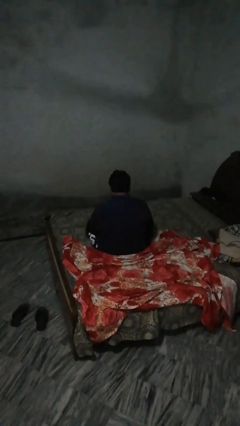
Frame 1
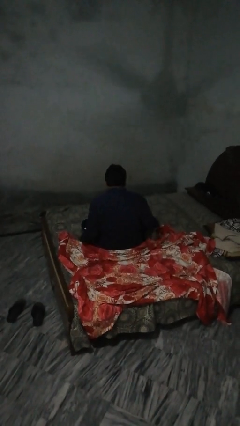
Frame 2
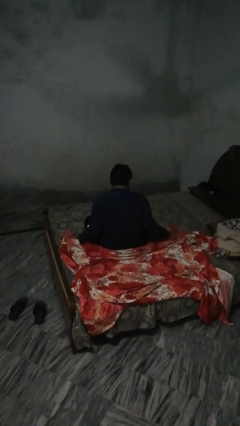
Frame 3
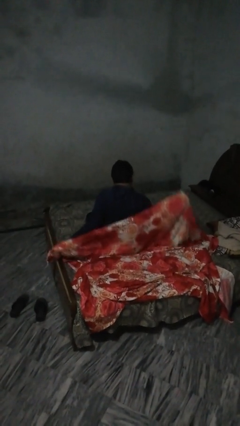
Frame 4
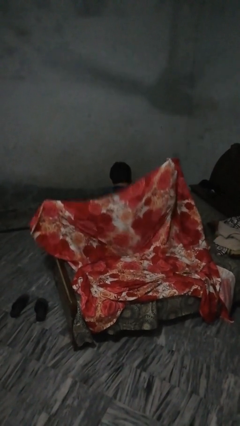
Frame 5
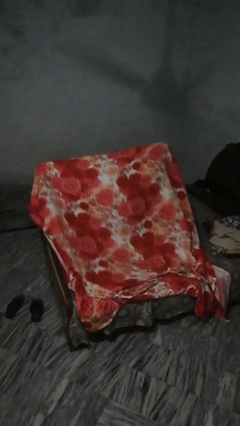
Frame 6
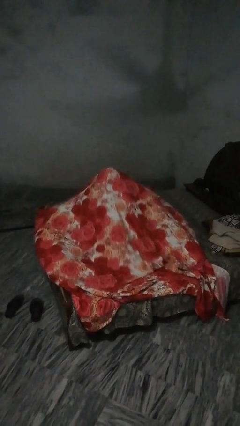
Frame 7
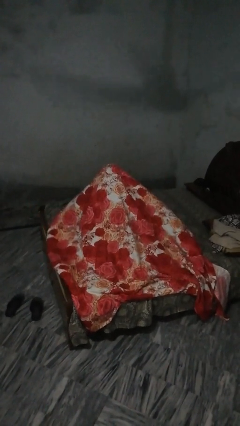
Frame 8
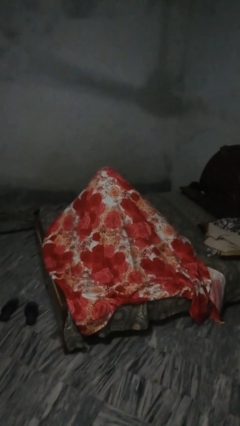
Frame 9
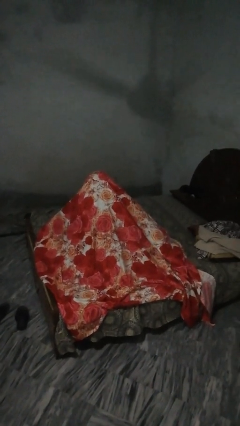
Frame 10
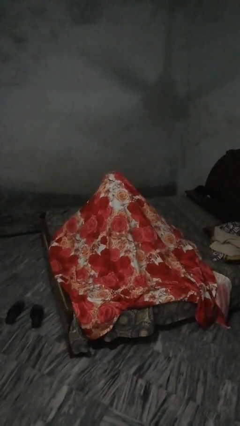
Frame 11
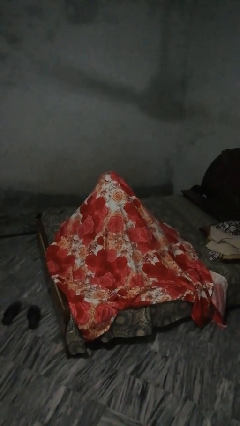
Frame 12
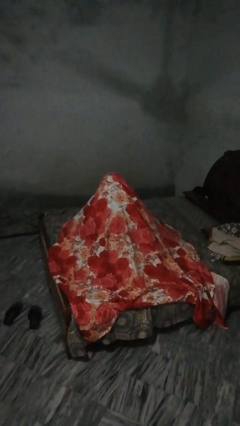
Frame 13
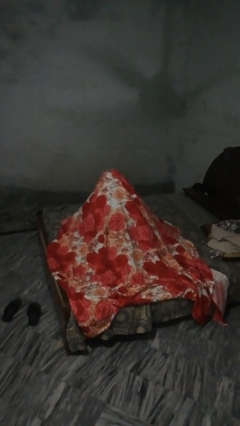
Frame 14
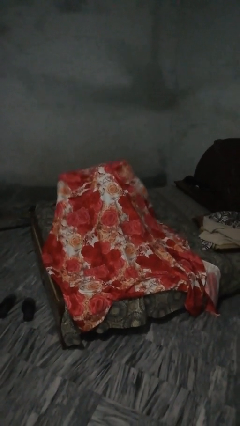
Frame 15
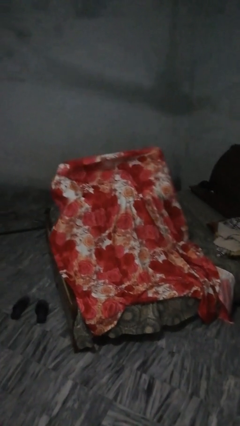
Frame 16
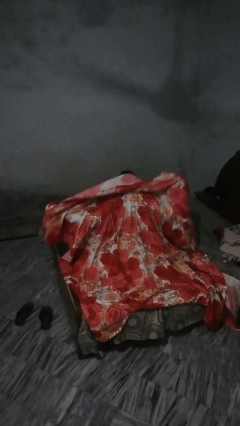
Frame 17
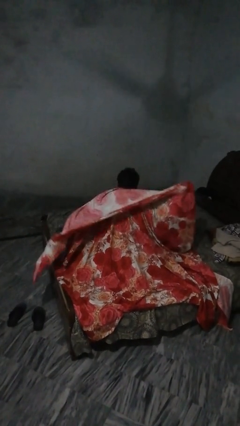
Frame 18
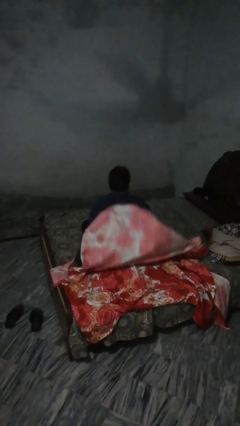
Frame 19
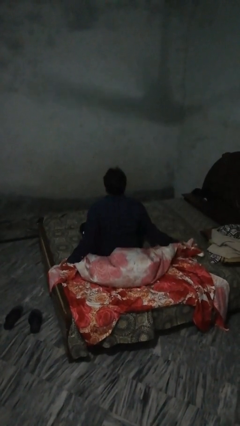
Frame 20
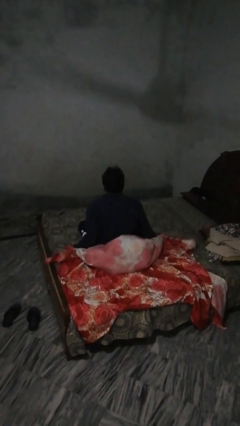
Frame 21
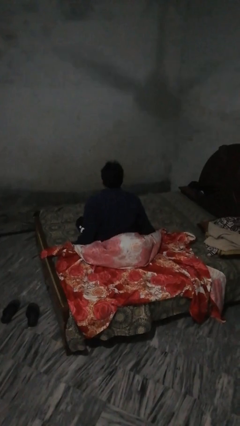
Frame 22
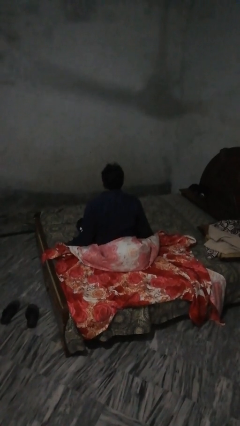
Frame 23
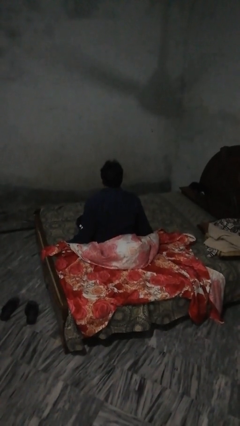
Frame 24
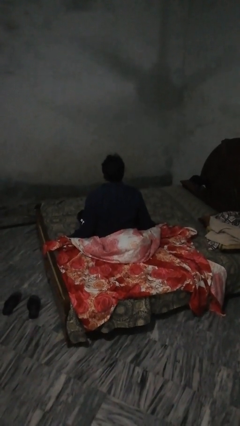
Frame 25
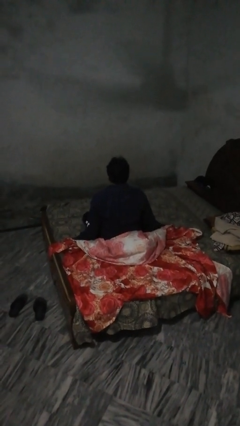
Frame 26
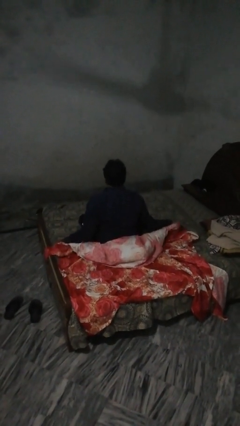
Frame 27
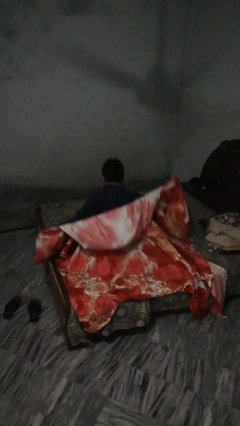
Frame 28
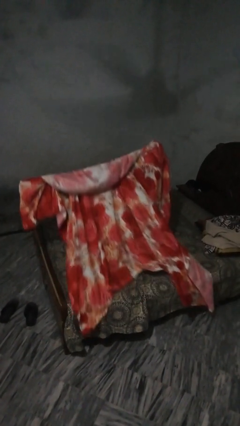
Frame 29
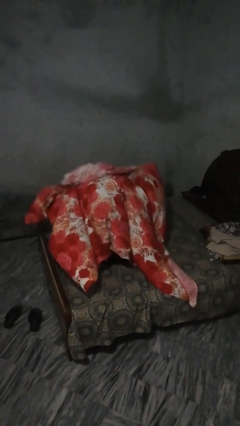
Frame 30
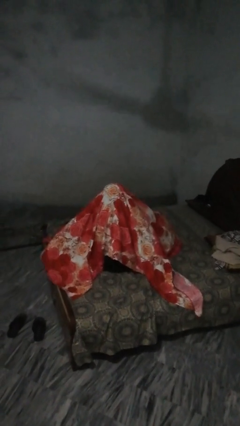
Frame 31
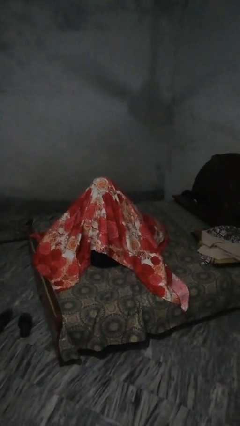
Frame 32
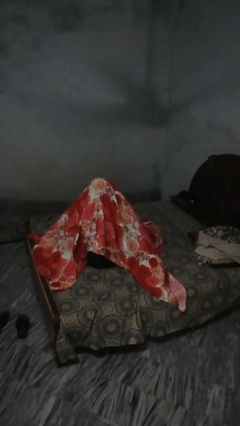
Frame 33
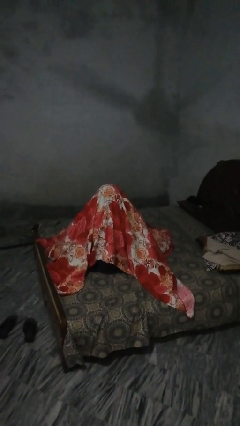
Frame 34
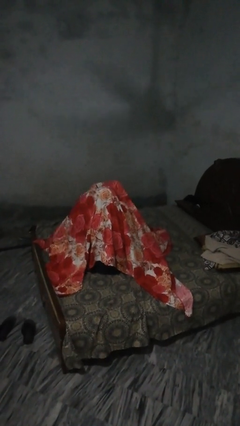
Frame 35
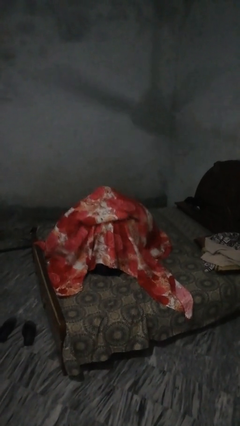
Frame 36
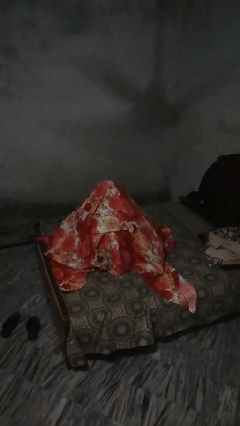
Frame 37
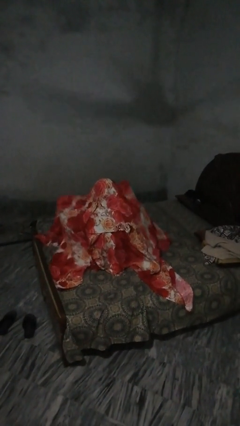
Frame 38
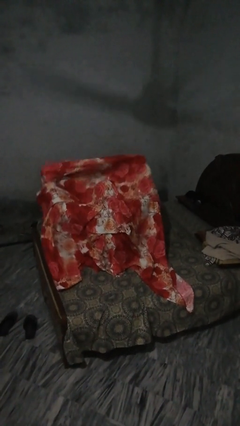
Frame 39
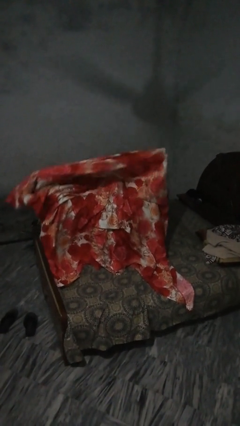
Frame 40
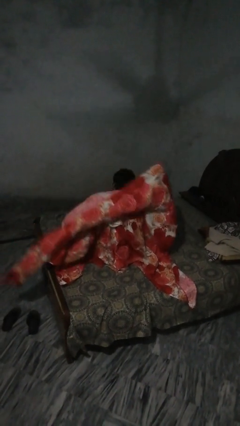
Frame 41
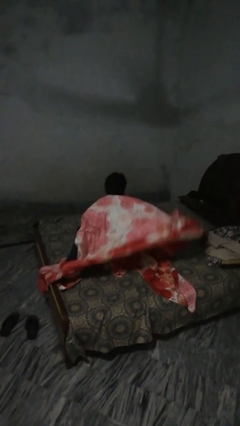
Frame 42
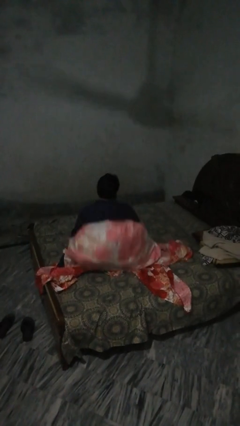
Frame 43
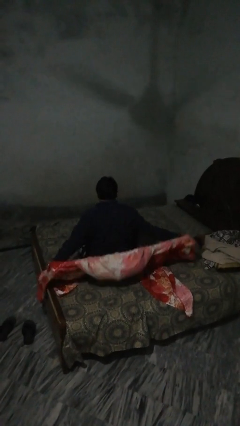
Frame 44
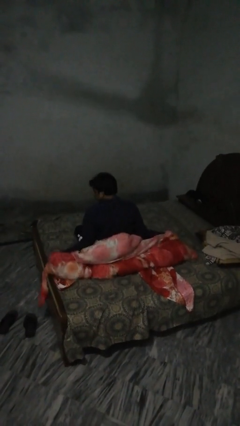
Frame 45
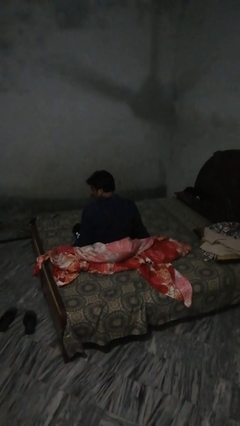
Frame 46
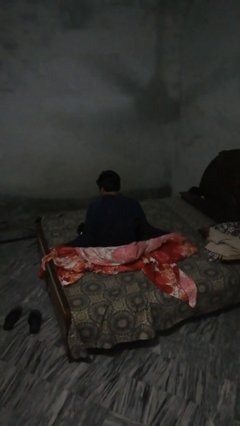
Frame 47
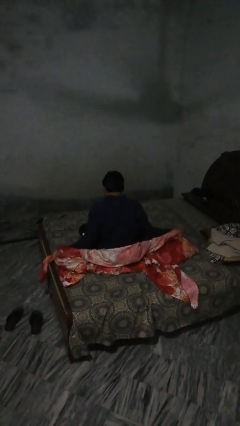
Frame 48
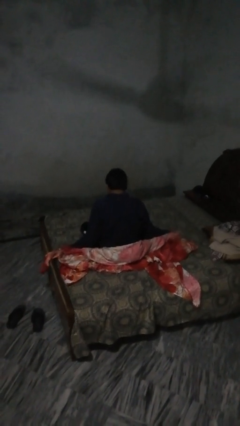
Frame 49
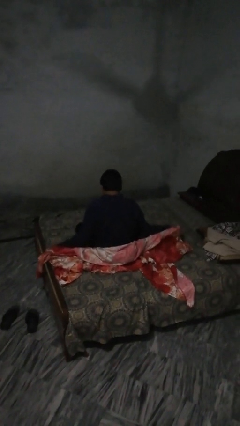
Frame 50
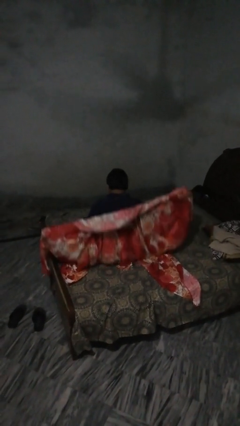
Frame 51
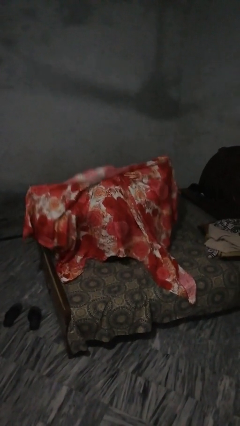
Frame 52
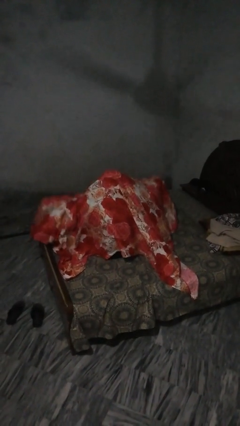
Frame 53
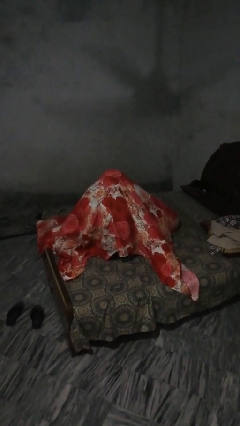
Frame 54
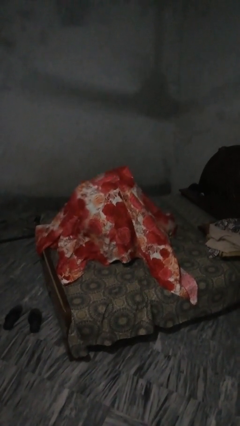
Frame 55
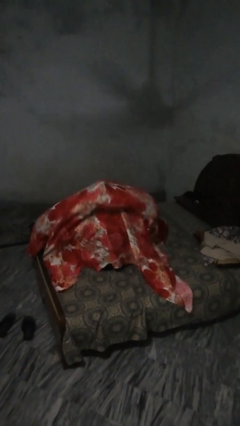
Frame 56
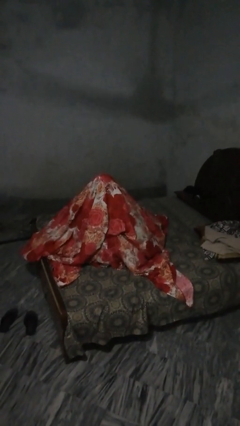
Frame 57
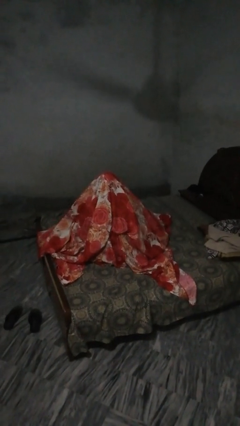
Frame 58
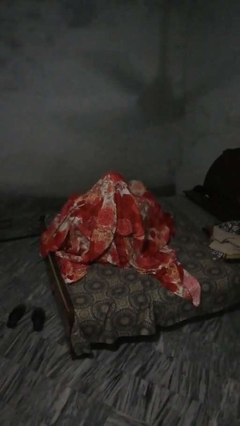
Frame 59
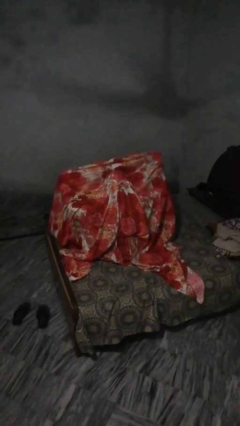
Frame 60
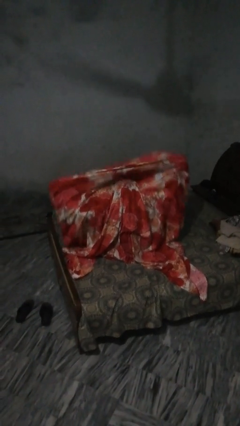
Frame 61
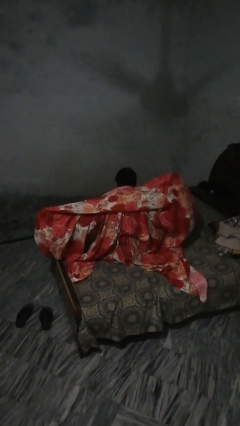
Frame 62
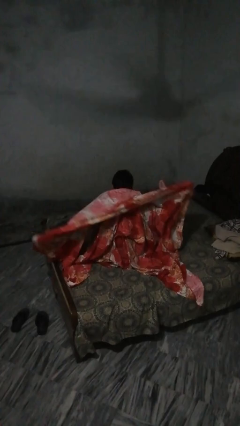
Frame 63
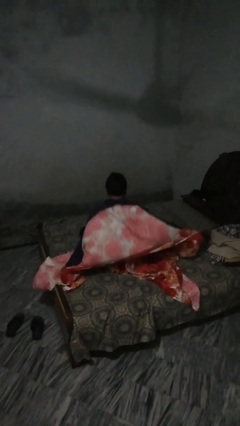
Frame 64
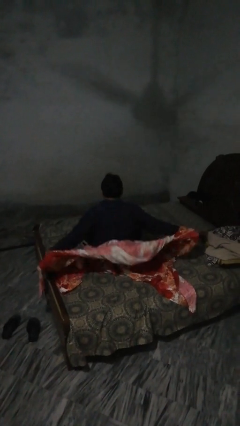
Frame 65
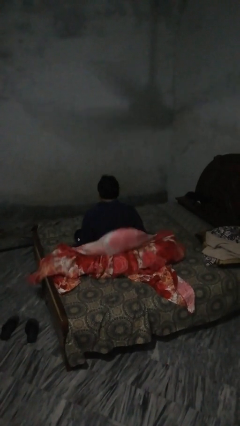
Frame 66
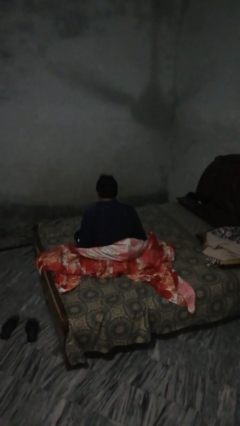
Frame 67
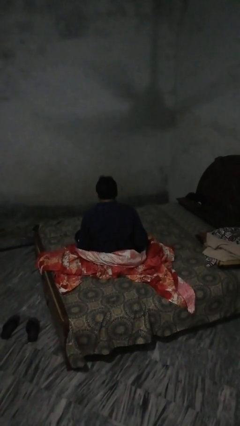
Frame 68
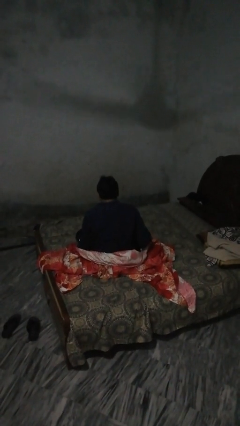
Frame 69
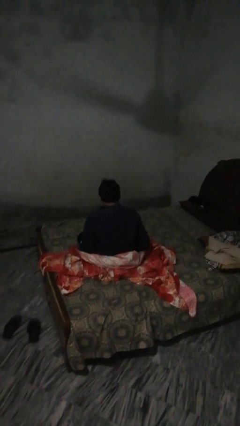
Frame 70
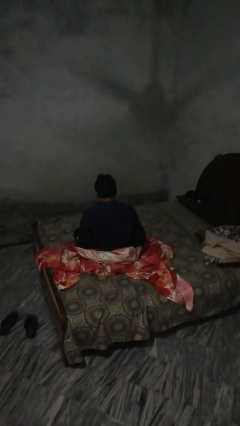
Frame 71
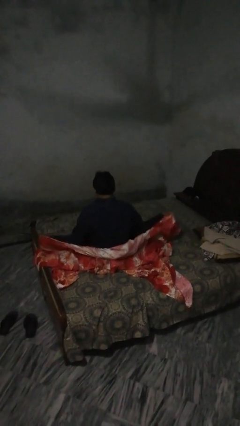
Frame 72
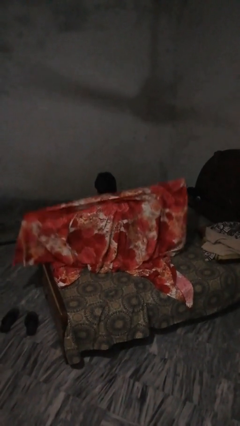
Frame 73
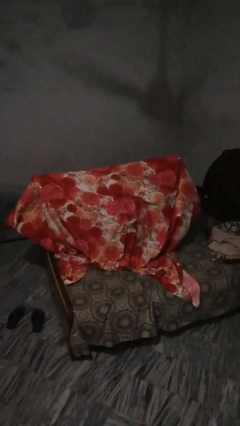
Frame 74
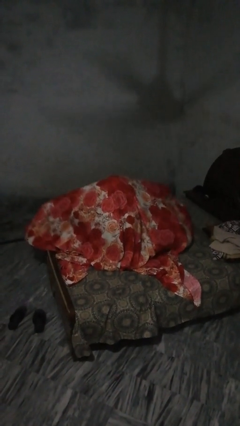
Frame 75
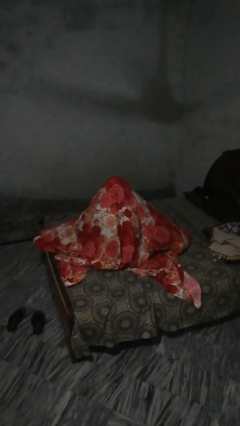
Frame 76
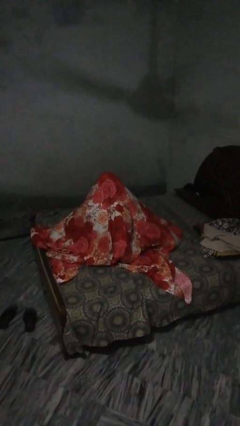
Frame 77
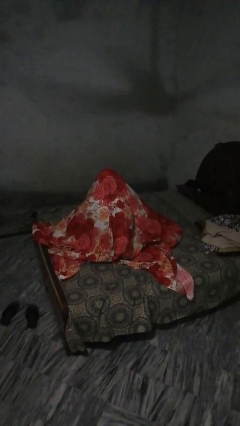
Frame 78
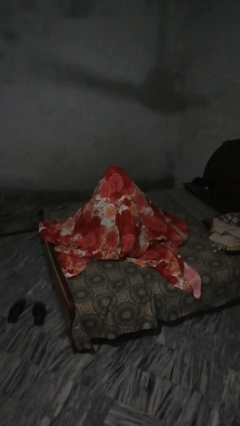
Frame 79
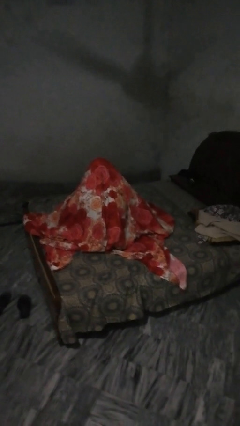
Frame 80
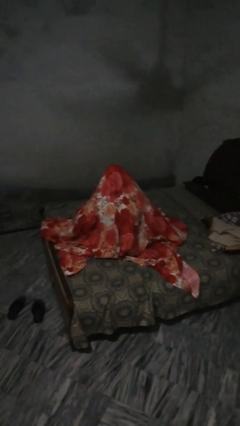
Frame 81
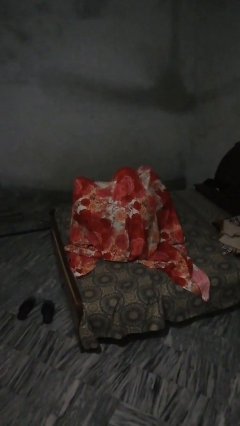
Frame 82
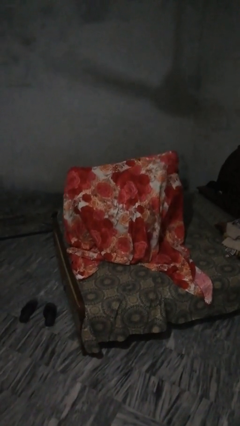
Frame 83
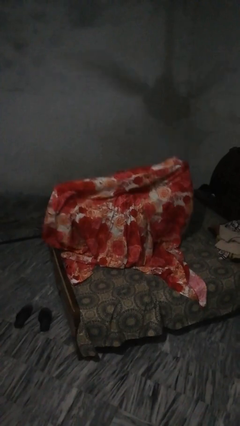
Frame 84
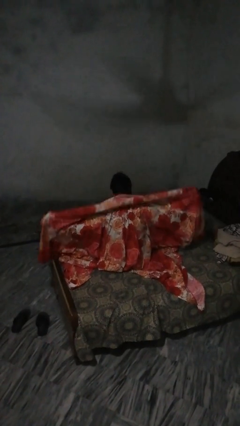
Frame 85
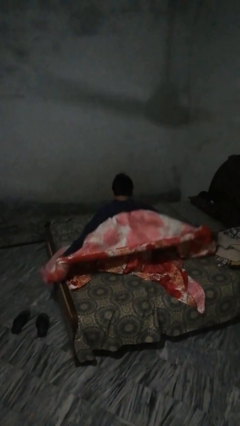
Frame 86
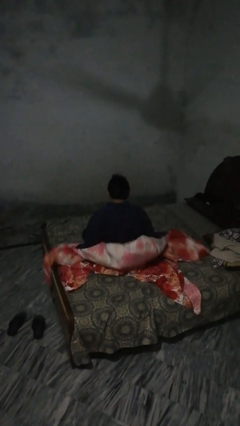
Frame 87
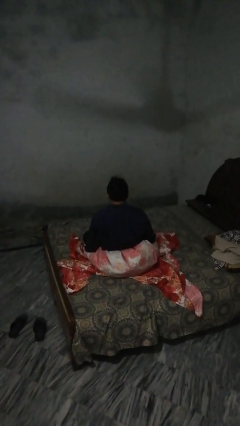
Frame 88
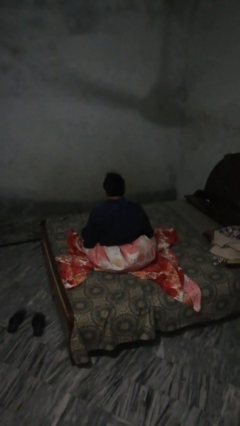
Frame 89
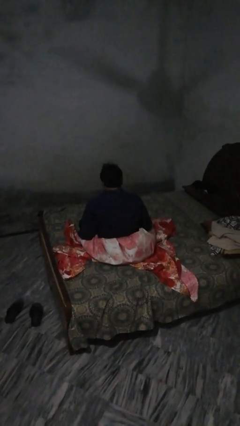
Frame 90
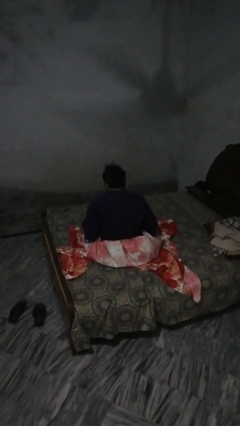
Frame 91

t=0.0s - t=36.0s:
person tears paper

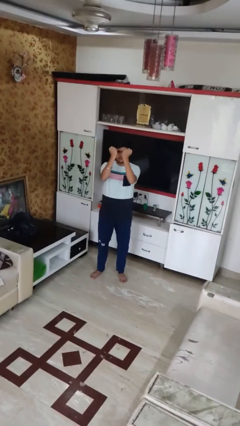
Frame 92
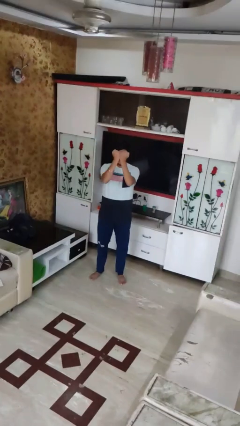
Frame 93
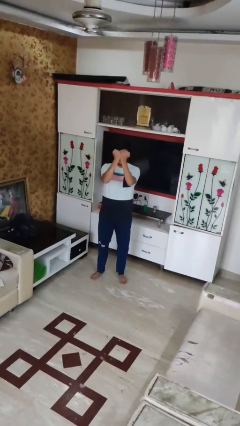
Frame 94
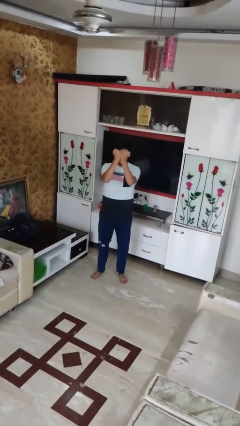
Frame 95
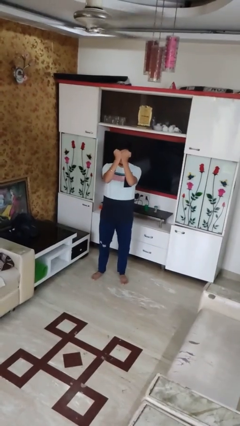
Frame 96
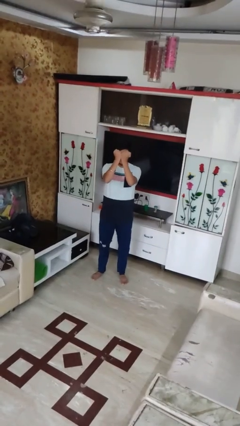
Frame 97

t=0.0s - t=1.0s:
person gestures zoom out
